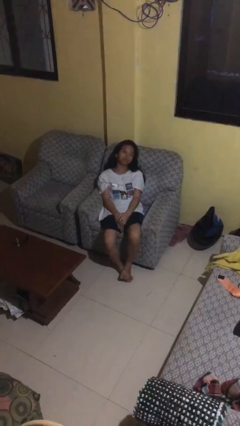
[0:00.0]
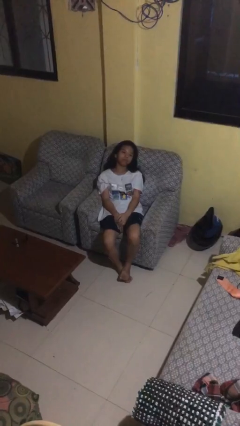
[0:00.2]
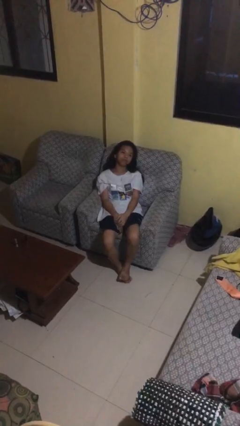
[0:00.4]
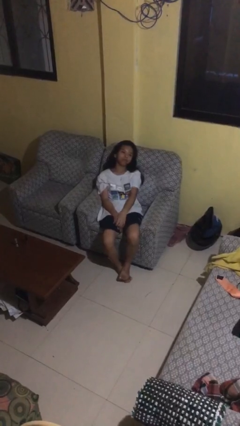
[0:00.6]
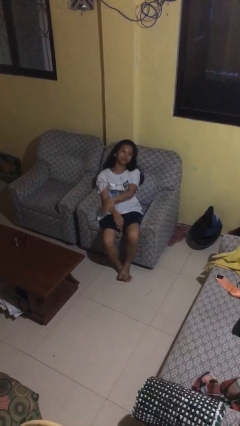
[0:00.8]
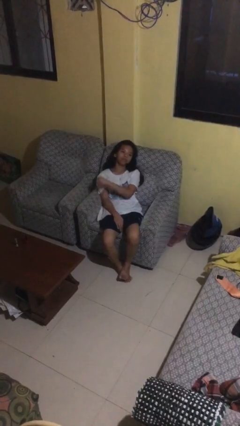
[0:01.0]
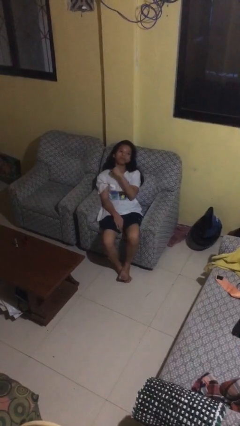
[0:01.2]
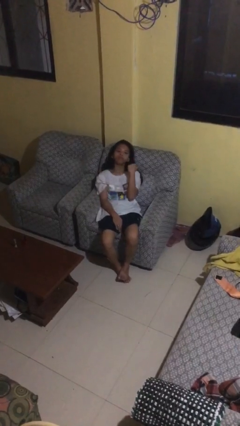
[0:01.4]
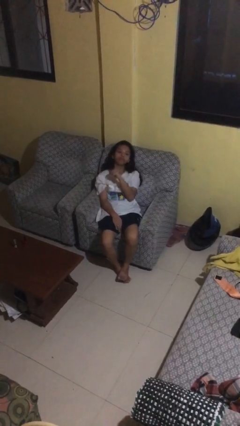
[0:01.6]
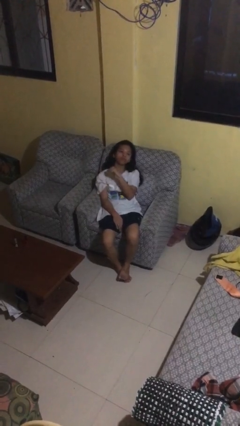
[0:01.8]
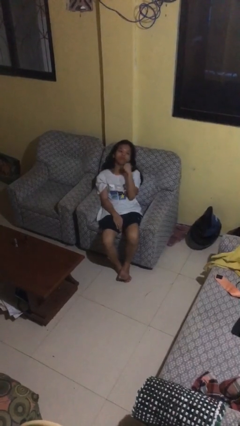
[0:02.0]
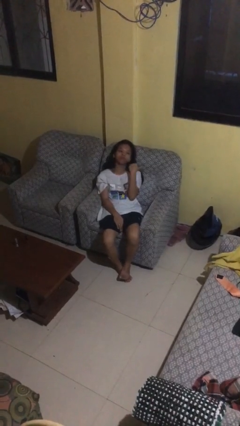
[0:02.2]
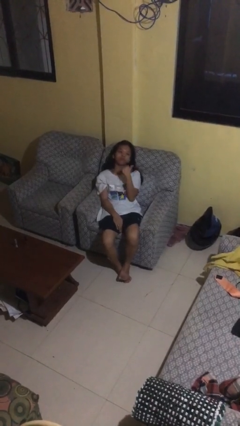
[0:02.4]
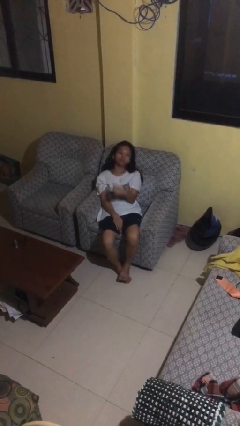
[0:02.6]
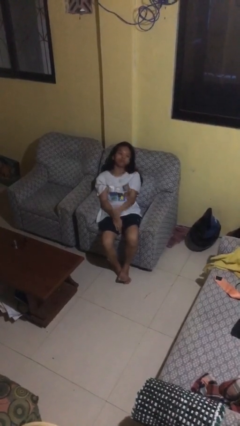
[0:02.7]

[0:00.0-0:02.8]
person gestures cut

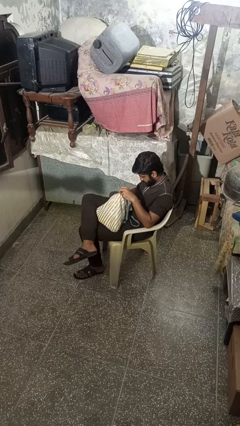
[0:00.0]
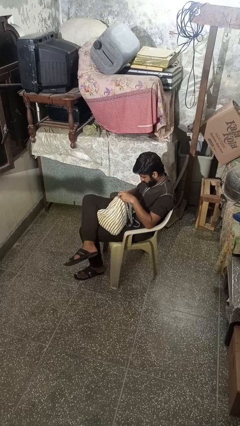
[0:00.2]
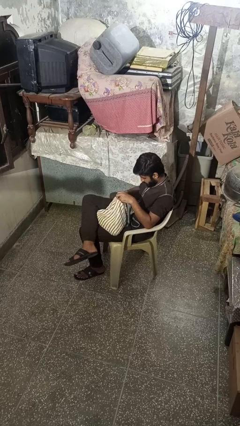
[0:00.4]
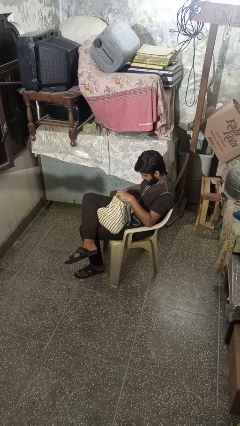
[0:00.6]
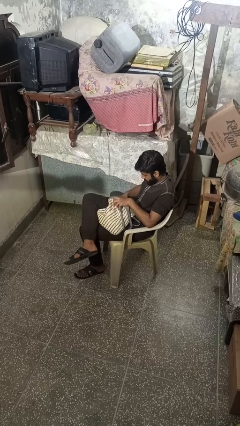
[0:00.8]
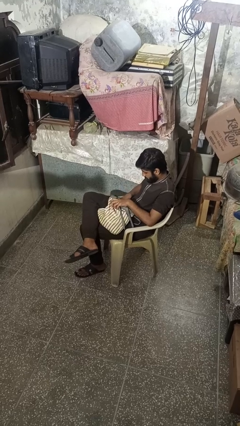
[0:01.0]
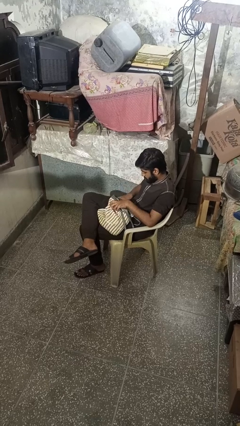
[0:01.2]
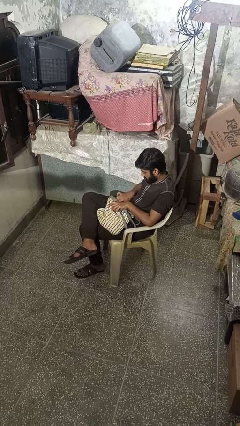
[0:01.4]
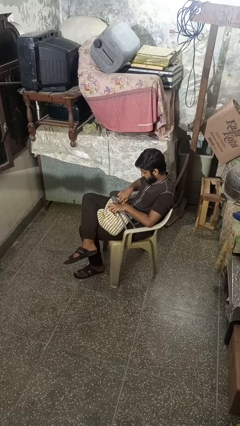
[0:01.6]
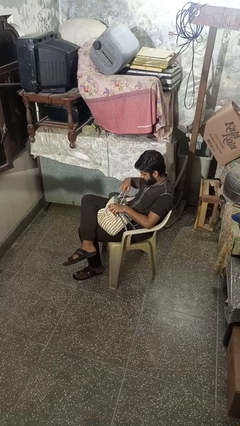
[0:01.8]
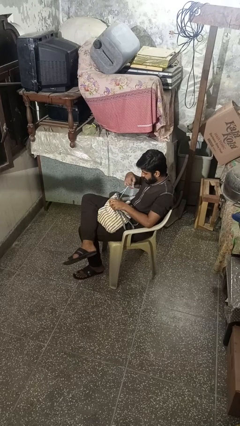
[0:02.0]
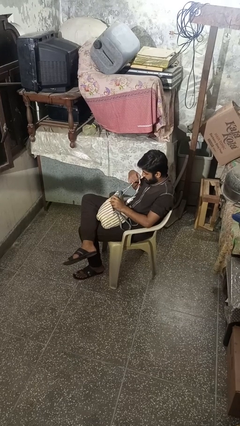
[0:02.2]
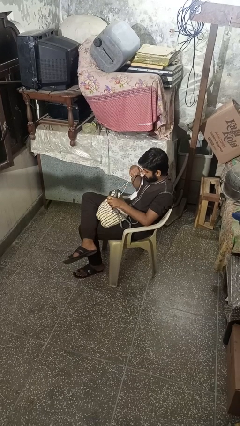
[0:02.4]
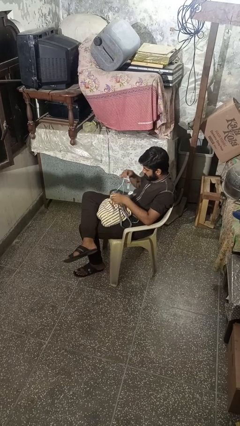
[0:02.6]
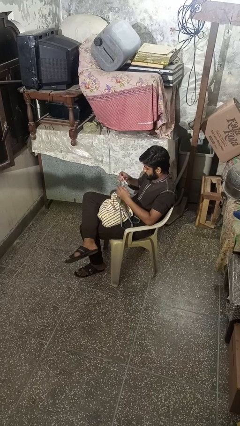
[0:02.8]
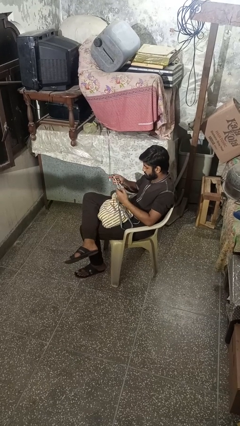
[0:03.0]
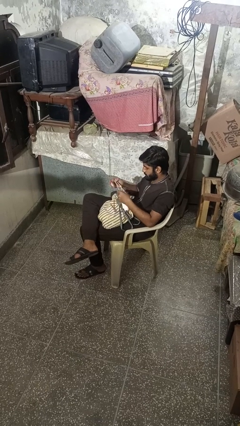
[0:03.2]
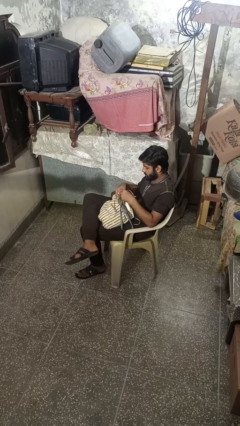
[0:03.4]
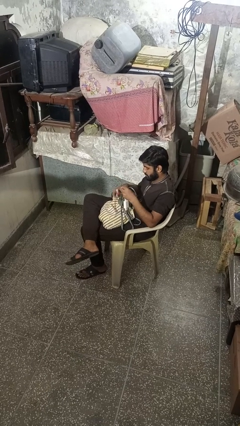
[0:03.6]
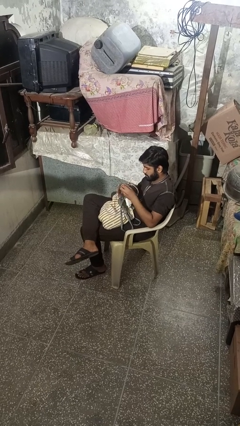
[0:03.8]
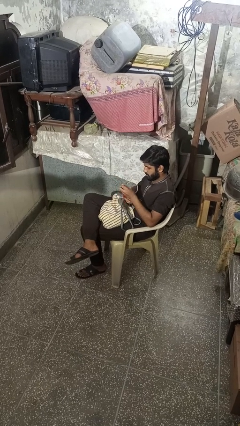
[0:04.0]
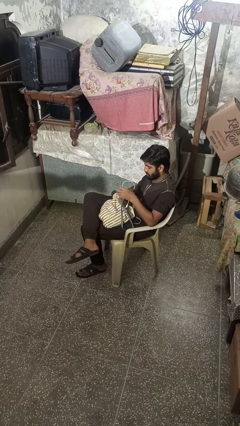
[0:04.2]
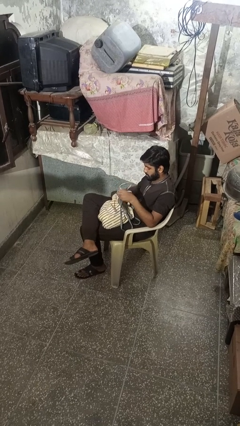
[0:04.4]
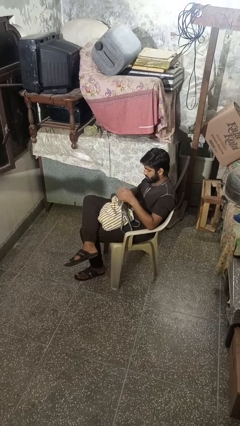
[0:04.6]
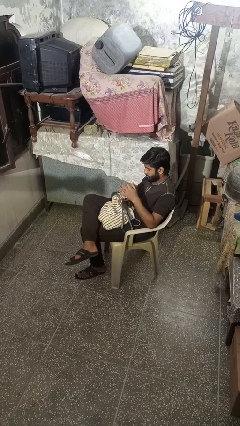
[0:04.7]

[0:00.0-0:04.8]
person takes object from purse

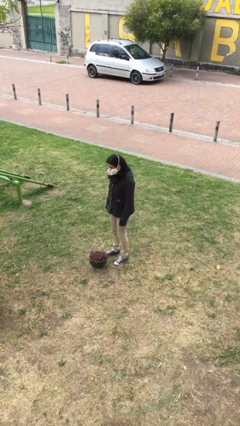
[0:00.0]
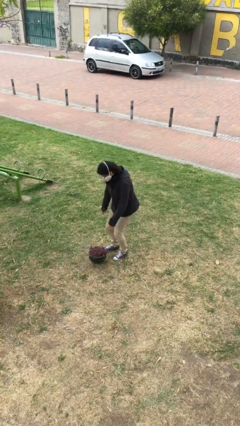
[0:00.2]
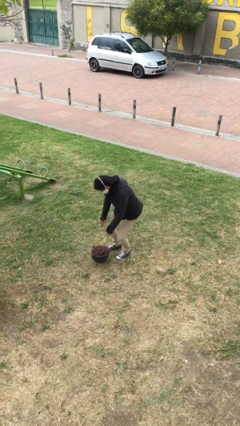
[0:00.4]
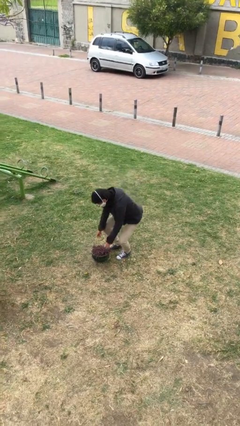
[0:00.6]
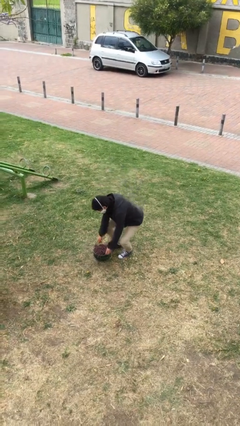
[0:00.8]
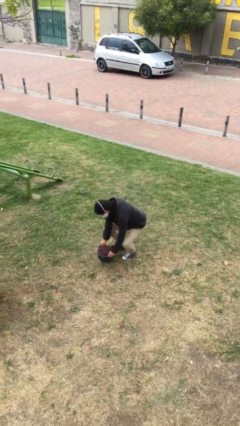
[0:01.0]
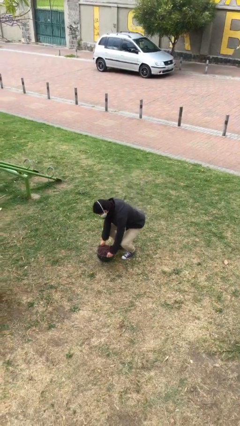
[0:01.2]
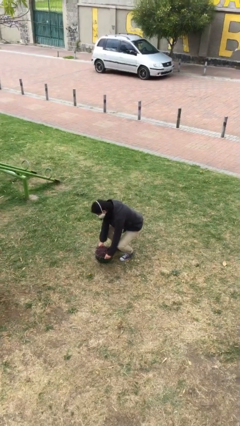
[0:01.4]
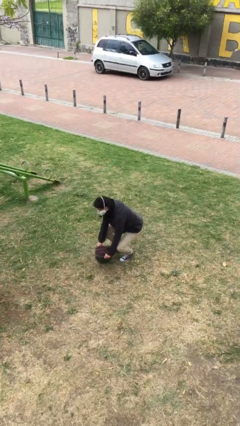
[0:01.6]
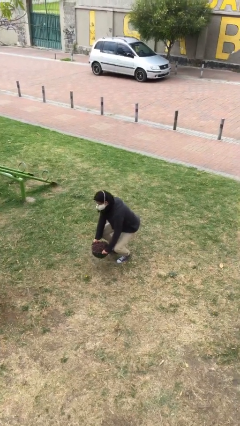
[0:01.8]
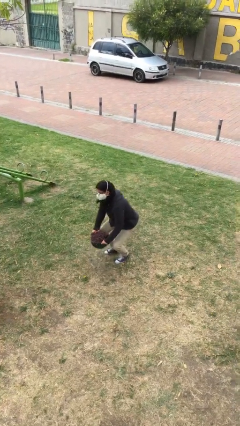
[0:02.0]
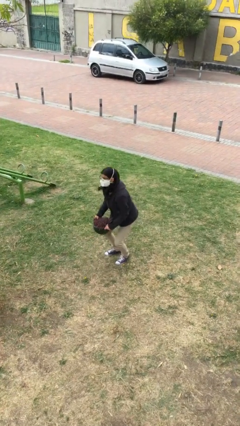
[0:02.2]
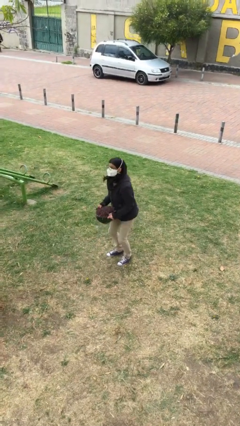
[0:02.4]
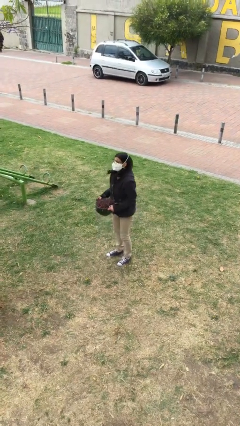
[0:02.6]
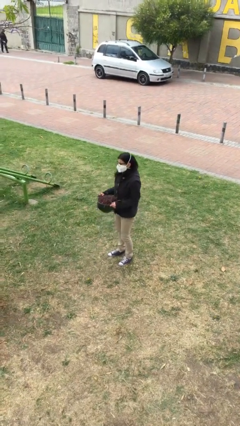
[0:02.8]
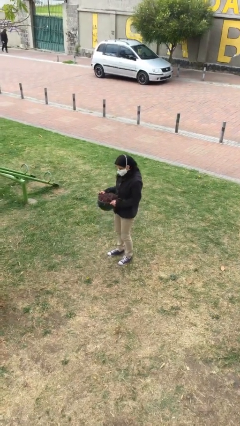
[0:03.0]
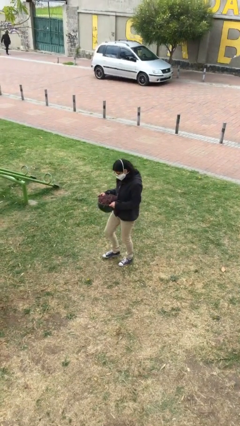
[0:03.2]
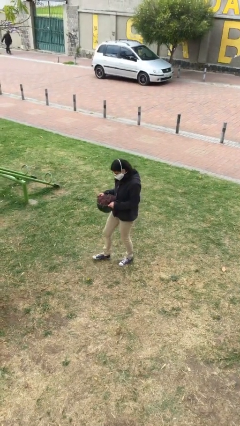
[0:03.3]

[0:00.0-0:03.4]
person picks up object from floor

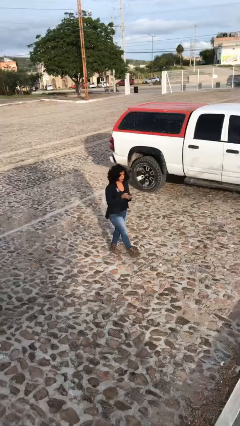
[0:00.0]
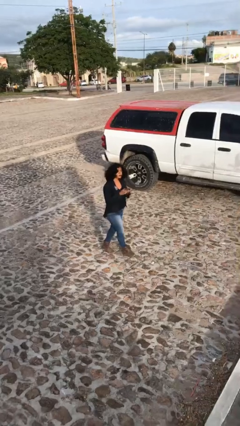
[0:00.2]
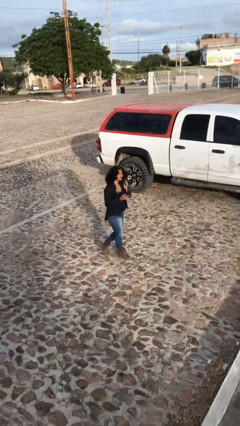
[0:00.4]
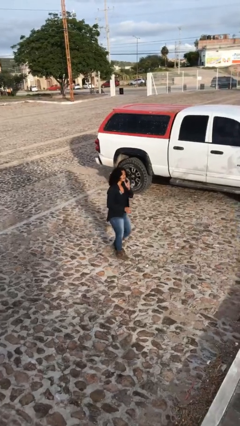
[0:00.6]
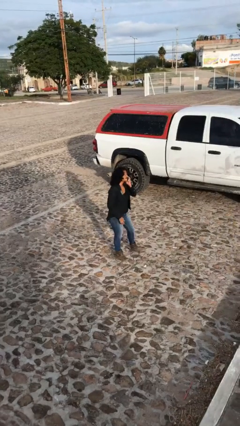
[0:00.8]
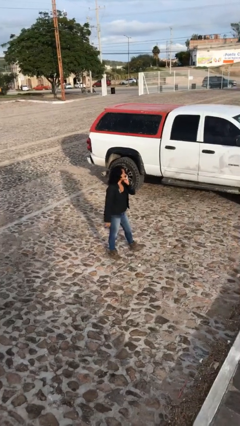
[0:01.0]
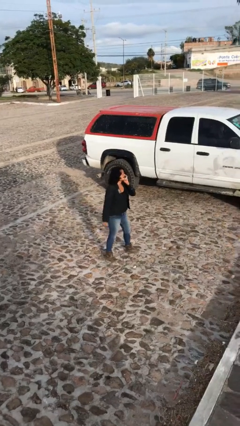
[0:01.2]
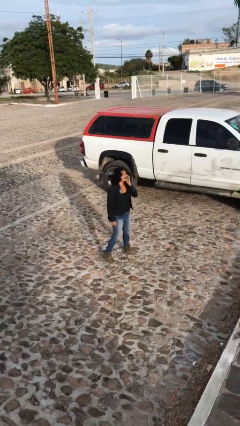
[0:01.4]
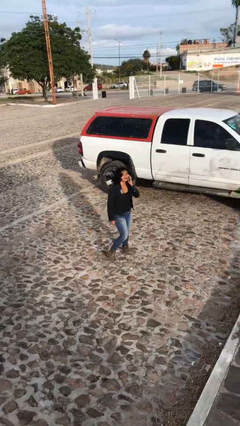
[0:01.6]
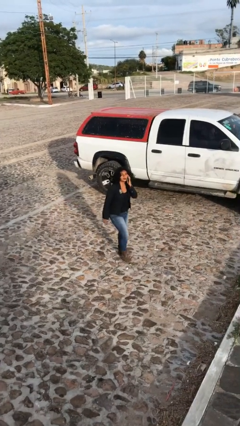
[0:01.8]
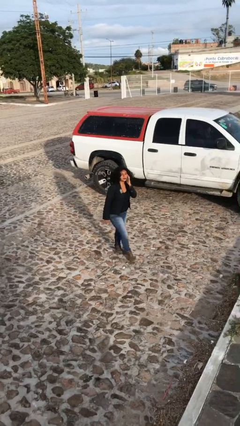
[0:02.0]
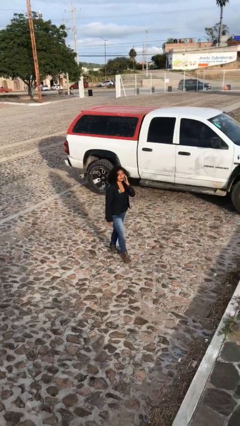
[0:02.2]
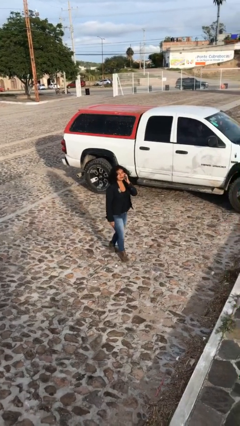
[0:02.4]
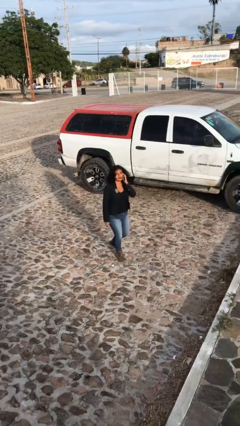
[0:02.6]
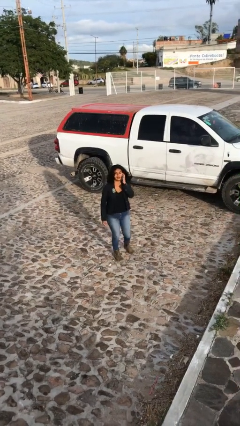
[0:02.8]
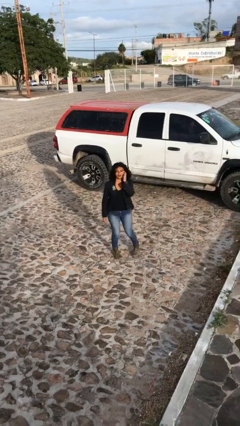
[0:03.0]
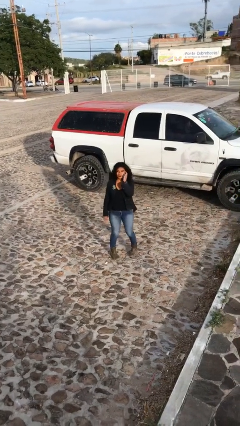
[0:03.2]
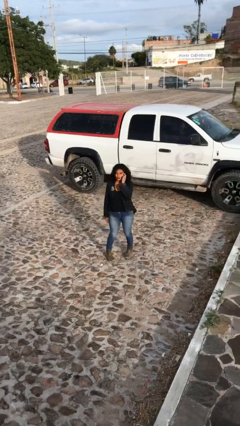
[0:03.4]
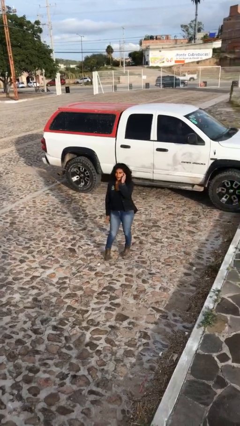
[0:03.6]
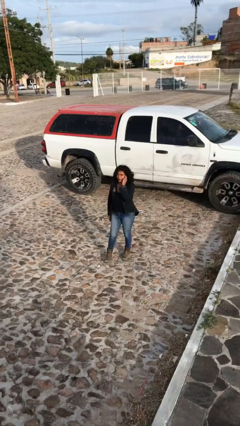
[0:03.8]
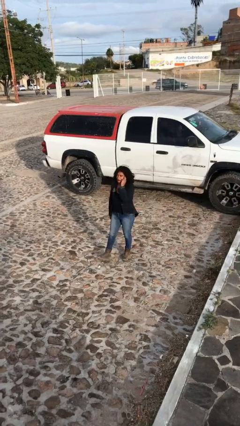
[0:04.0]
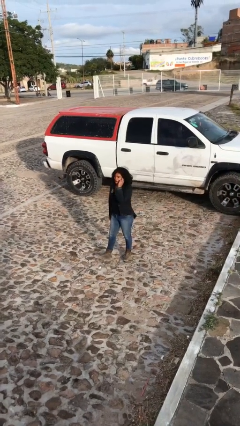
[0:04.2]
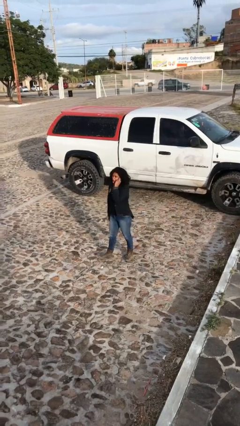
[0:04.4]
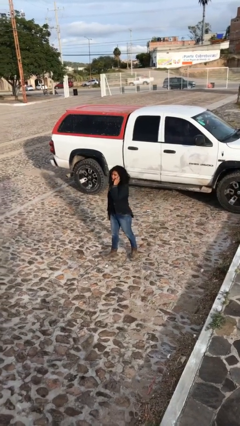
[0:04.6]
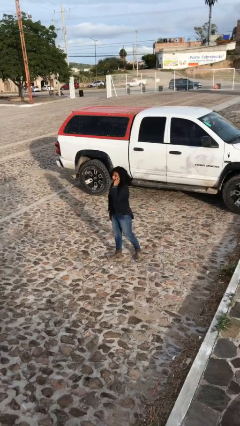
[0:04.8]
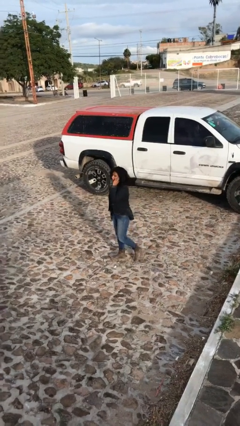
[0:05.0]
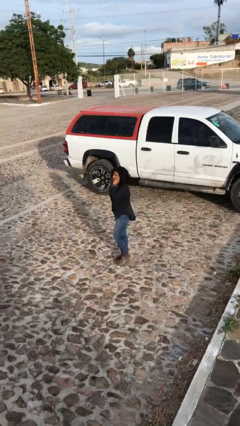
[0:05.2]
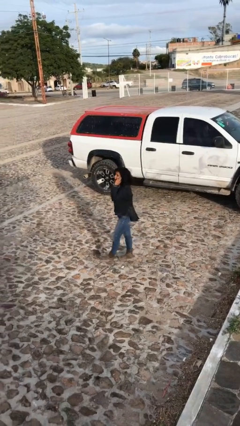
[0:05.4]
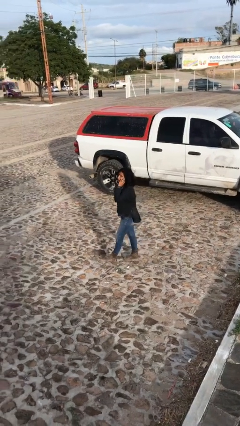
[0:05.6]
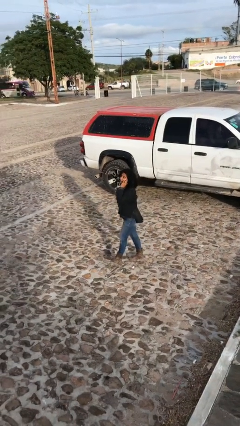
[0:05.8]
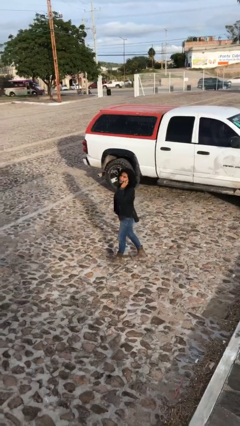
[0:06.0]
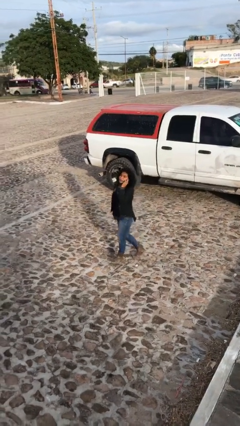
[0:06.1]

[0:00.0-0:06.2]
person talks on phone

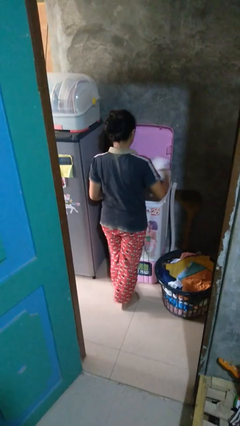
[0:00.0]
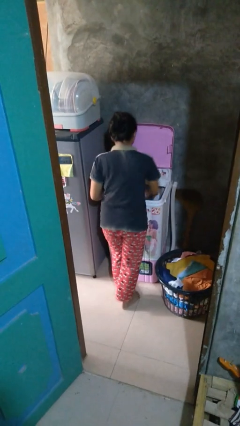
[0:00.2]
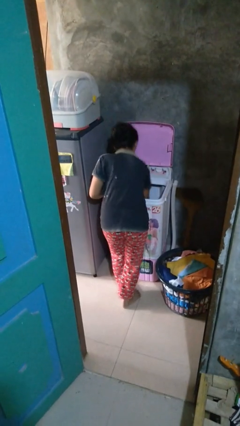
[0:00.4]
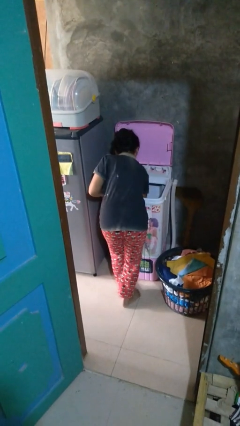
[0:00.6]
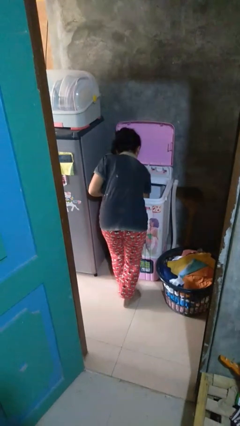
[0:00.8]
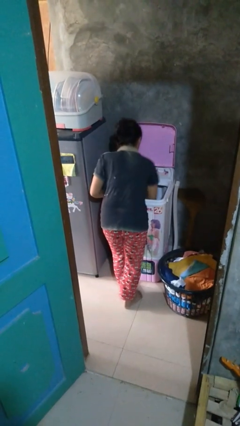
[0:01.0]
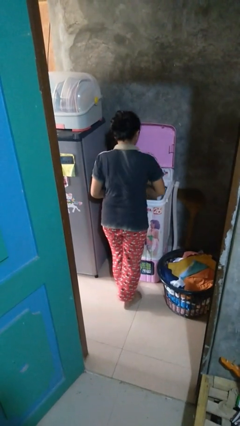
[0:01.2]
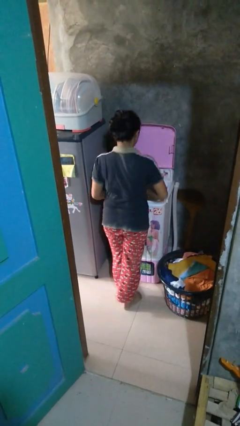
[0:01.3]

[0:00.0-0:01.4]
person loads clotheswasher
